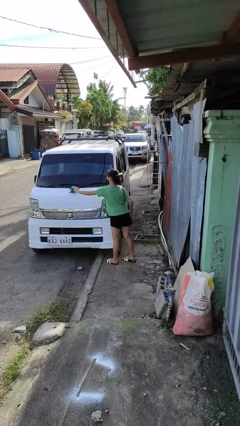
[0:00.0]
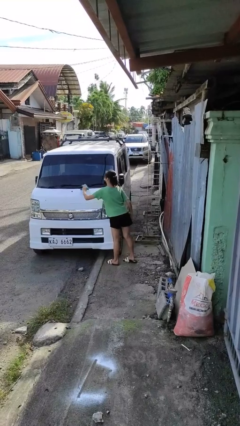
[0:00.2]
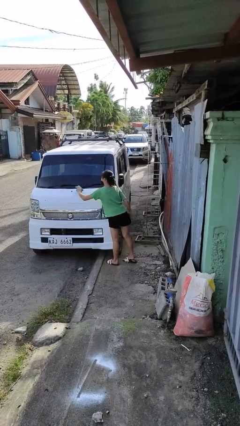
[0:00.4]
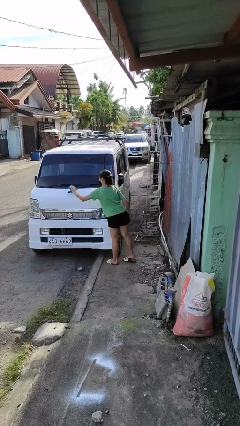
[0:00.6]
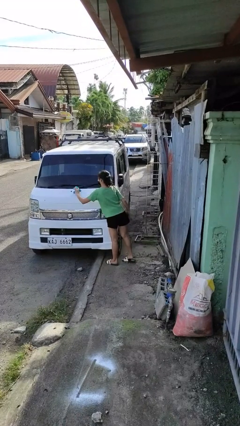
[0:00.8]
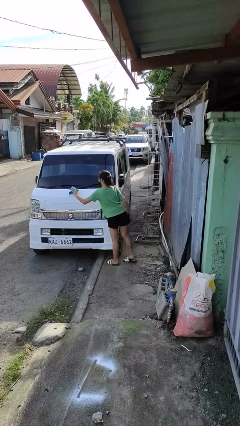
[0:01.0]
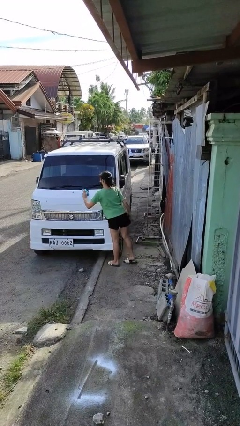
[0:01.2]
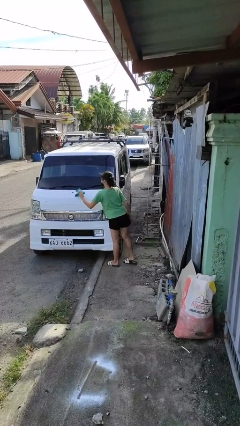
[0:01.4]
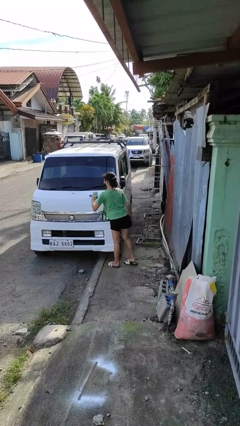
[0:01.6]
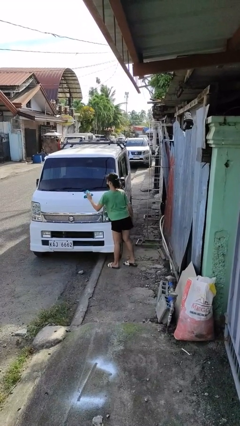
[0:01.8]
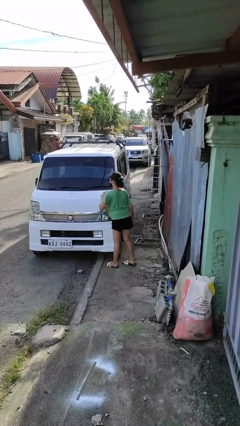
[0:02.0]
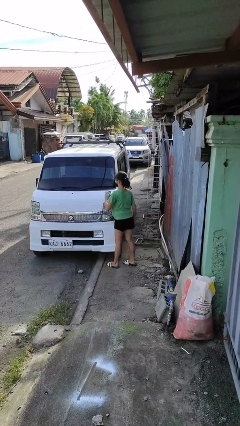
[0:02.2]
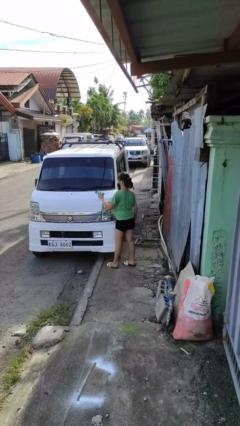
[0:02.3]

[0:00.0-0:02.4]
person polishes car with rag

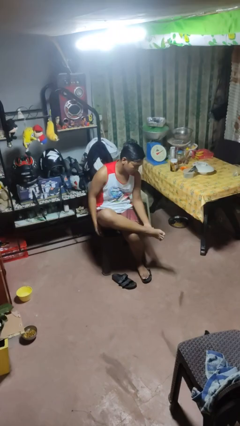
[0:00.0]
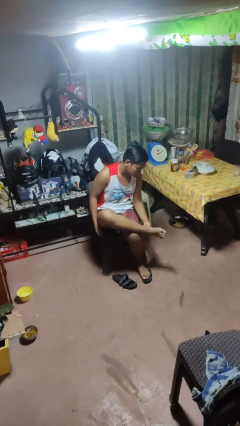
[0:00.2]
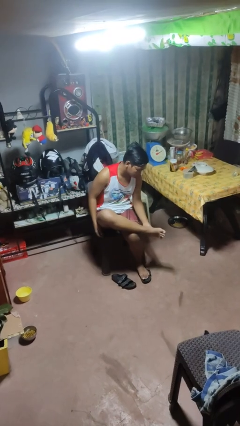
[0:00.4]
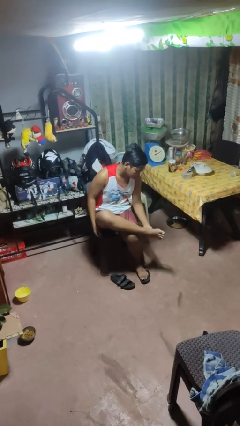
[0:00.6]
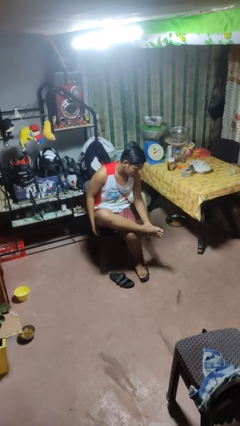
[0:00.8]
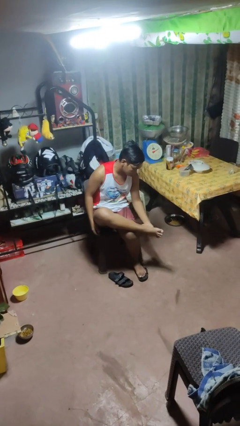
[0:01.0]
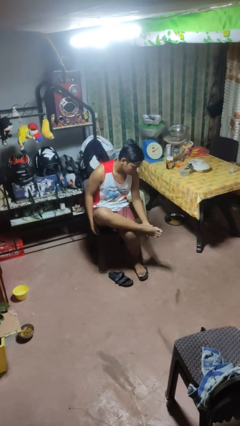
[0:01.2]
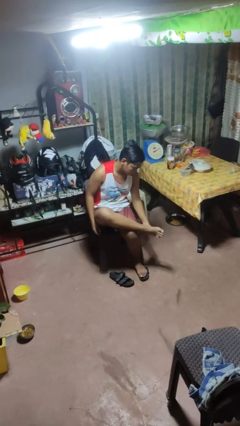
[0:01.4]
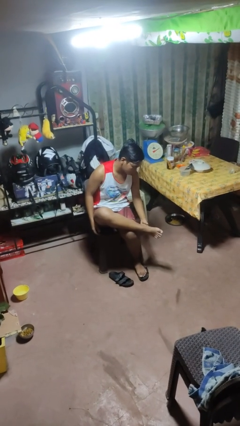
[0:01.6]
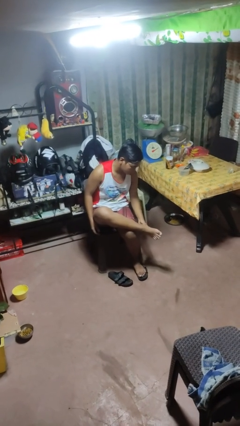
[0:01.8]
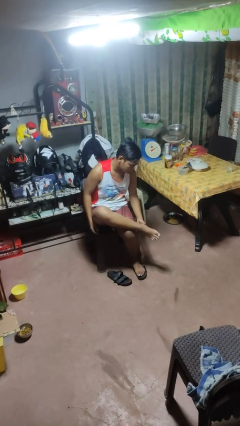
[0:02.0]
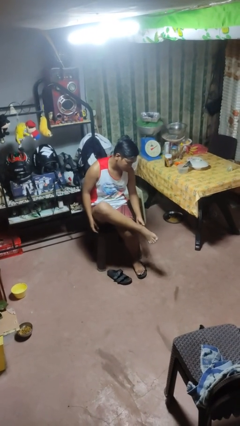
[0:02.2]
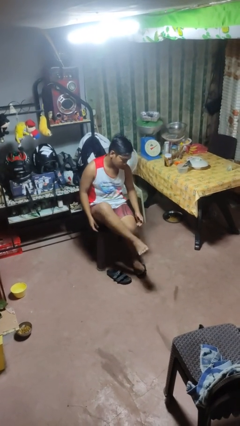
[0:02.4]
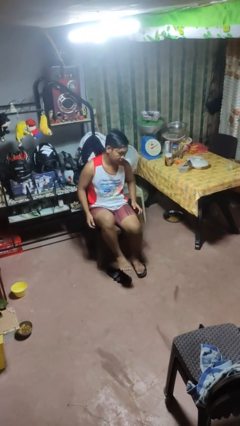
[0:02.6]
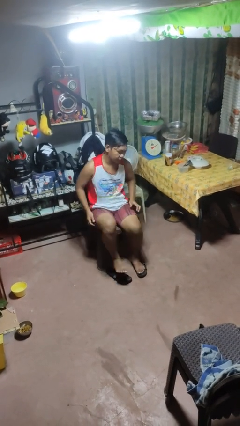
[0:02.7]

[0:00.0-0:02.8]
person rubs foot

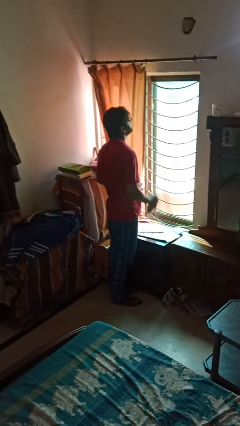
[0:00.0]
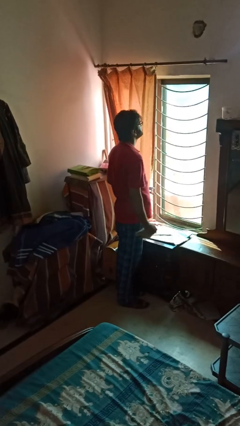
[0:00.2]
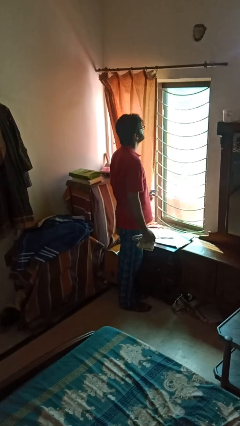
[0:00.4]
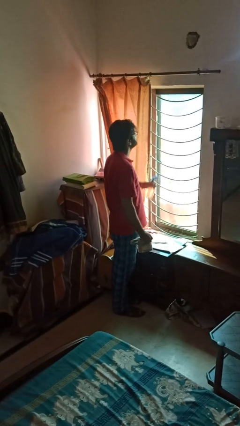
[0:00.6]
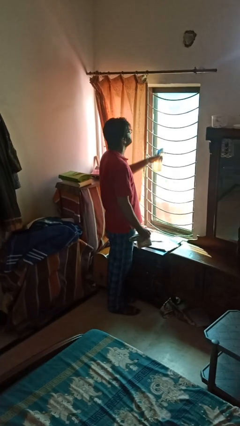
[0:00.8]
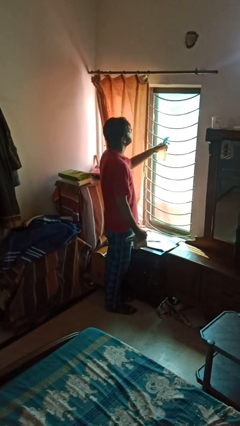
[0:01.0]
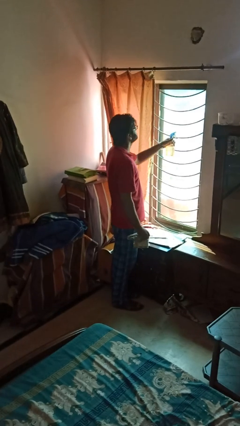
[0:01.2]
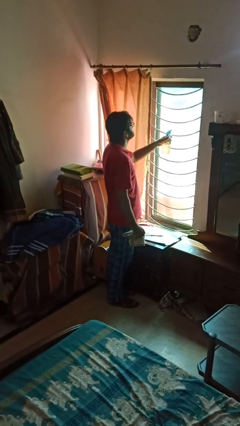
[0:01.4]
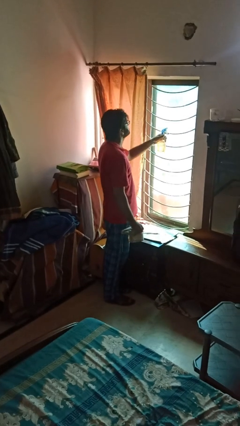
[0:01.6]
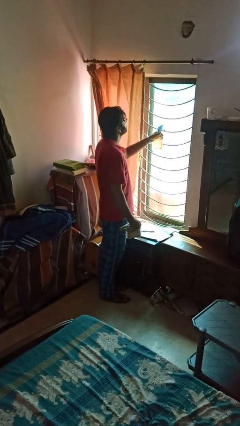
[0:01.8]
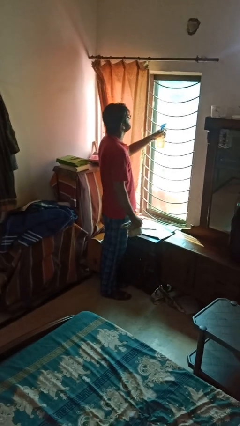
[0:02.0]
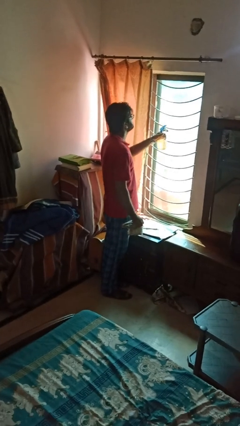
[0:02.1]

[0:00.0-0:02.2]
person sprays from bottle

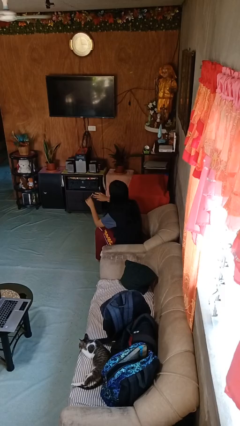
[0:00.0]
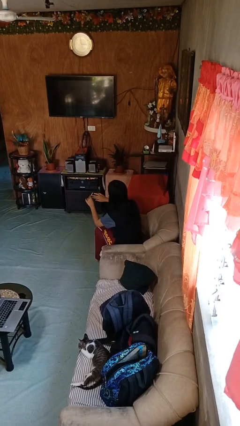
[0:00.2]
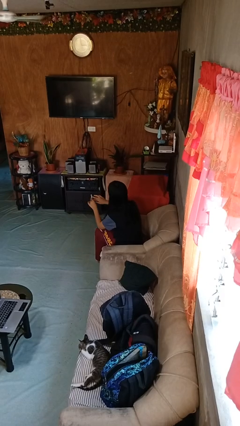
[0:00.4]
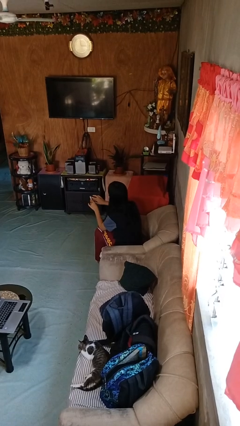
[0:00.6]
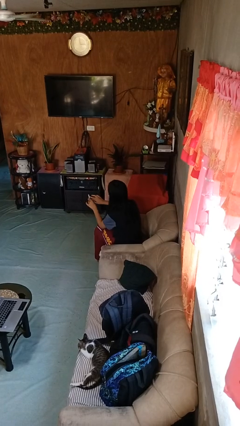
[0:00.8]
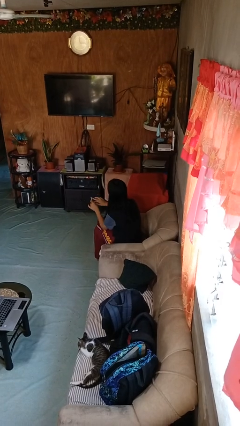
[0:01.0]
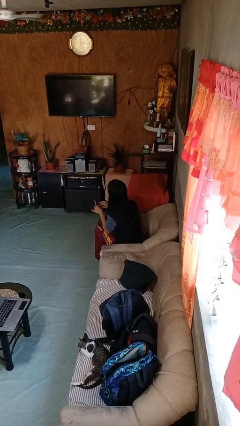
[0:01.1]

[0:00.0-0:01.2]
person files fingernails

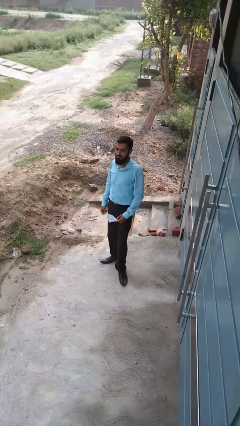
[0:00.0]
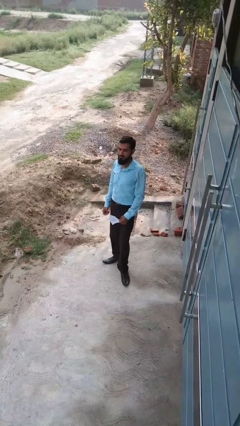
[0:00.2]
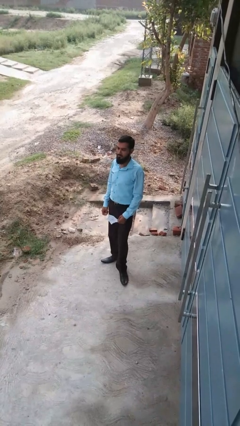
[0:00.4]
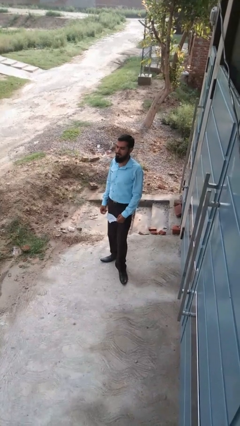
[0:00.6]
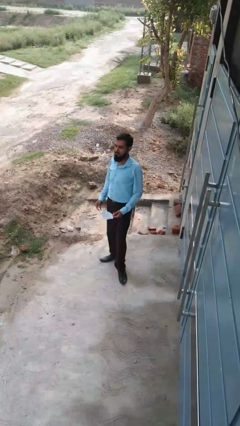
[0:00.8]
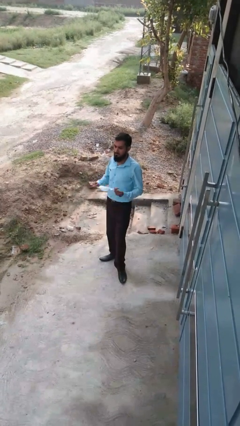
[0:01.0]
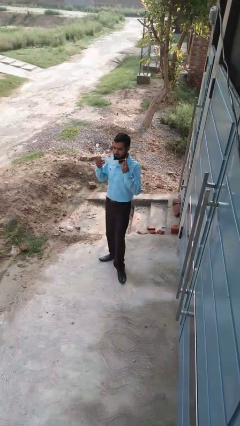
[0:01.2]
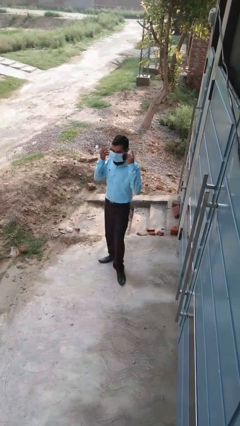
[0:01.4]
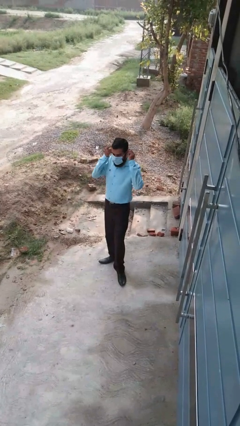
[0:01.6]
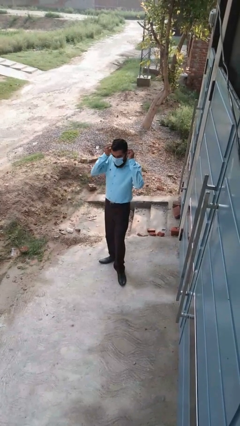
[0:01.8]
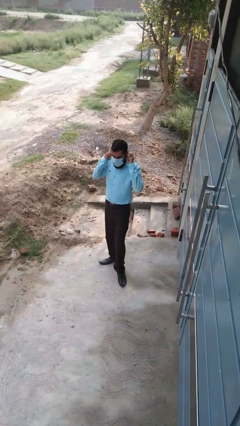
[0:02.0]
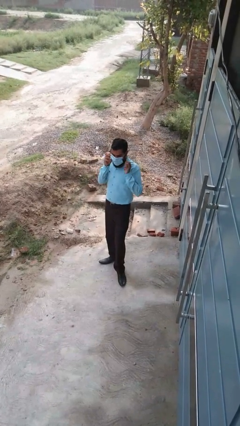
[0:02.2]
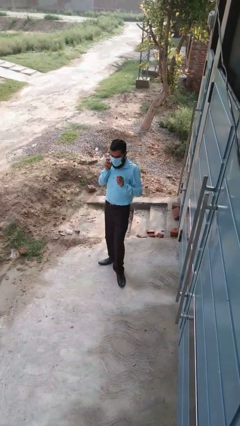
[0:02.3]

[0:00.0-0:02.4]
person puts on facemask

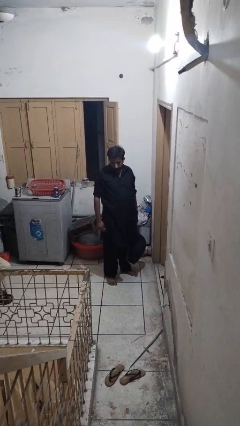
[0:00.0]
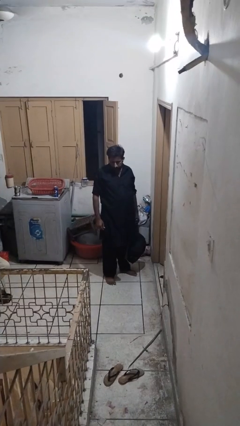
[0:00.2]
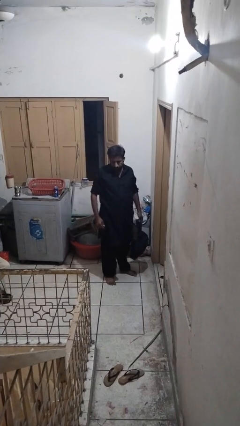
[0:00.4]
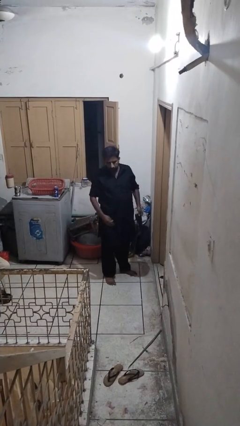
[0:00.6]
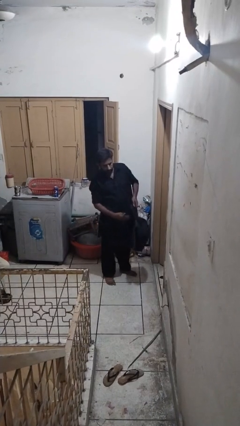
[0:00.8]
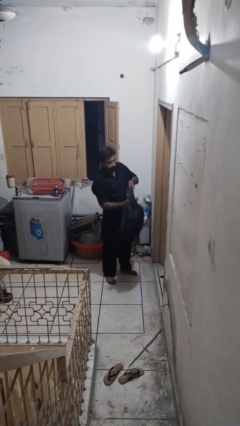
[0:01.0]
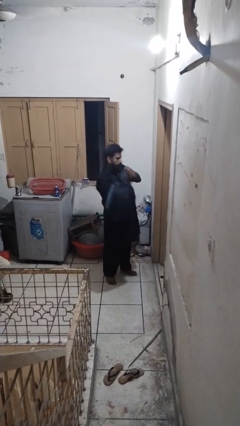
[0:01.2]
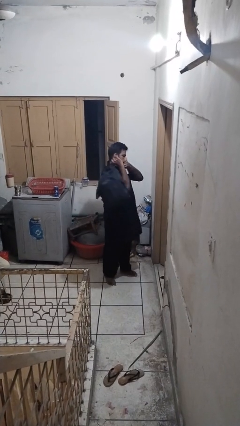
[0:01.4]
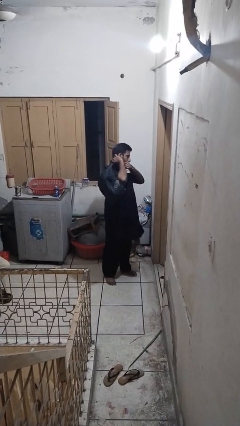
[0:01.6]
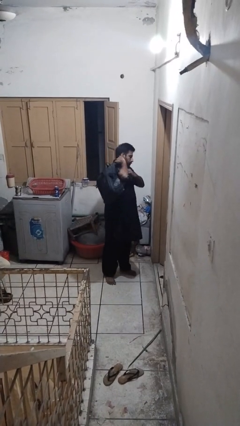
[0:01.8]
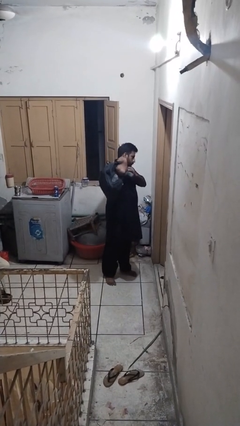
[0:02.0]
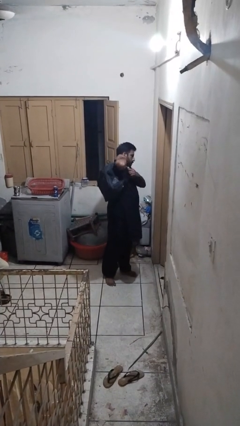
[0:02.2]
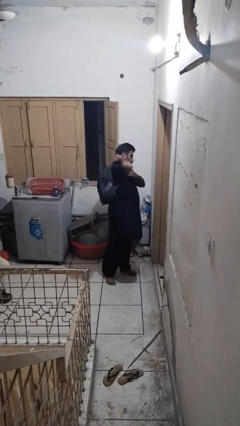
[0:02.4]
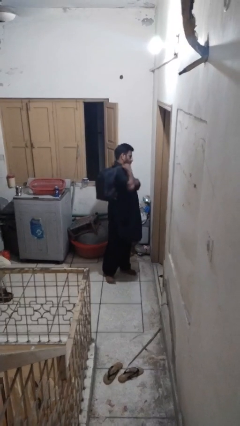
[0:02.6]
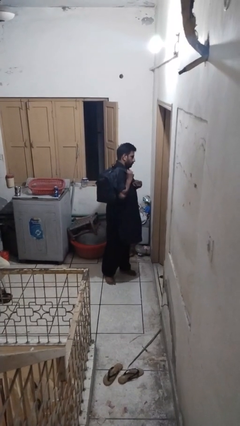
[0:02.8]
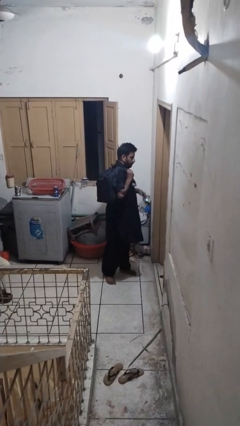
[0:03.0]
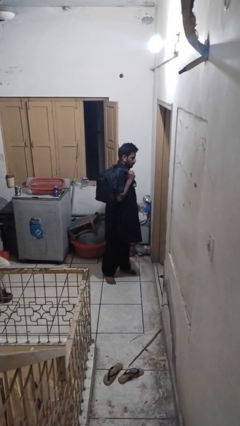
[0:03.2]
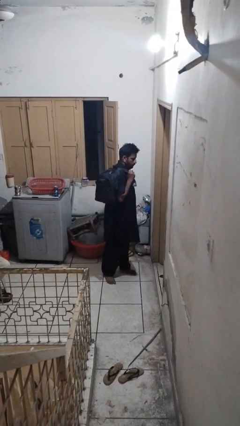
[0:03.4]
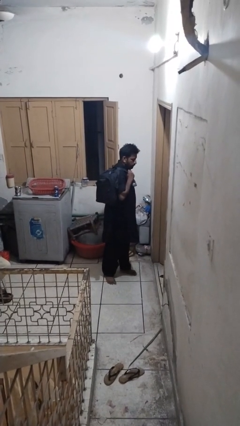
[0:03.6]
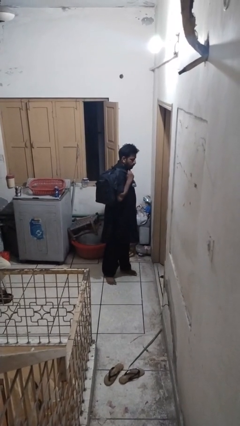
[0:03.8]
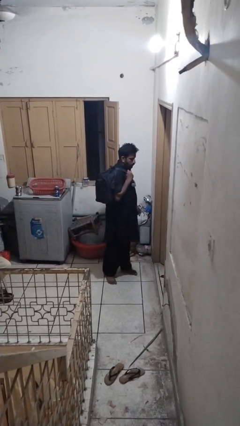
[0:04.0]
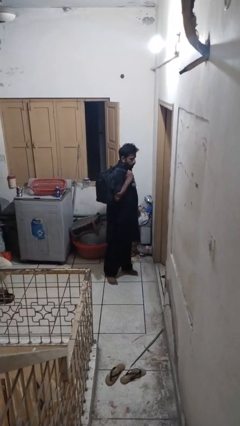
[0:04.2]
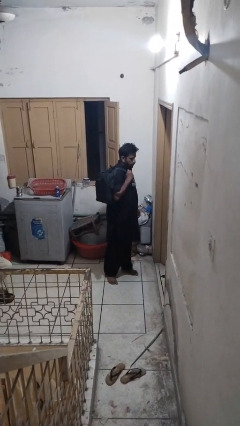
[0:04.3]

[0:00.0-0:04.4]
person puts on backpack

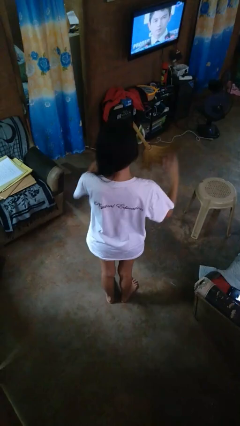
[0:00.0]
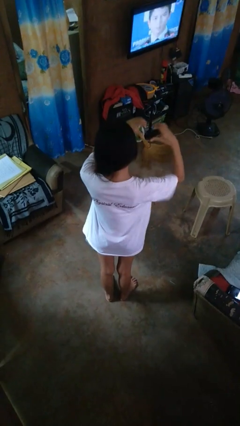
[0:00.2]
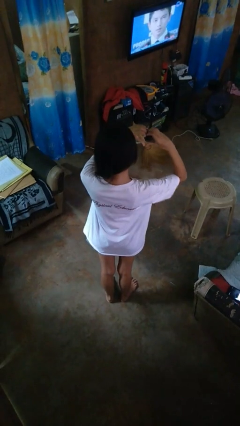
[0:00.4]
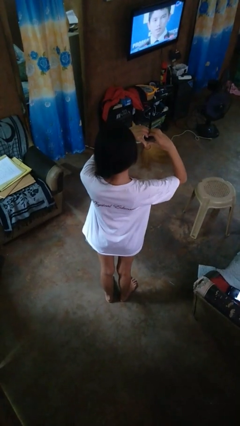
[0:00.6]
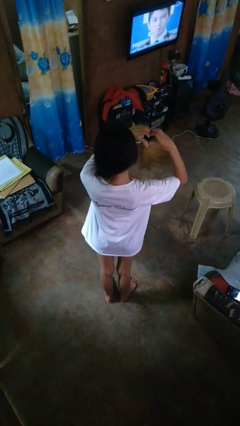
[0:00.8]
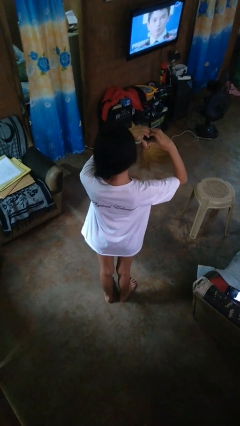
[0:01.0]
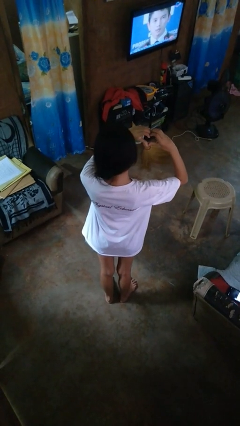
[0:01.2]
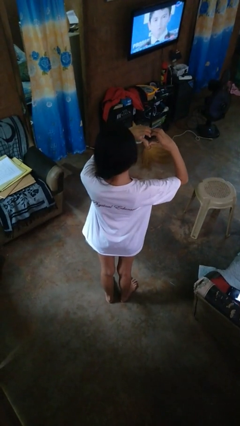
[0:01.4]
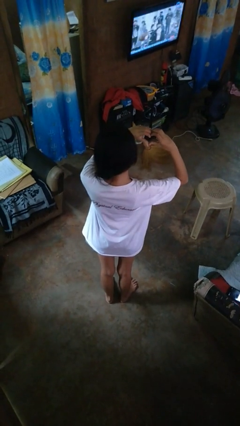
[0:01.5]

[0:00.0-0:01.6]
person gestures heart
